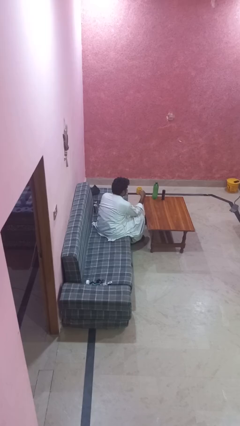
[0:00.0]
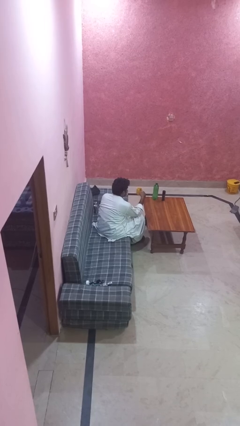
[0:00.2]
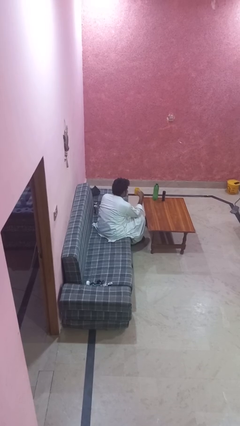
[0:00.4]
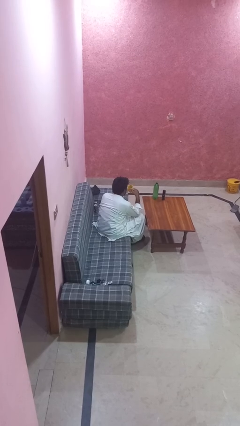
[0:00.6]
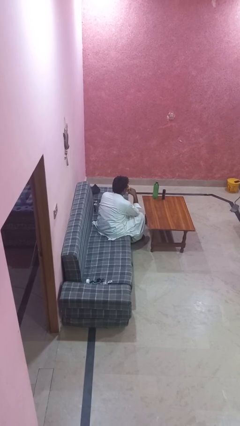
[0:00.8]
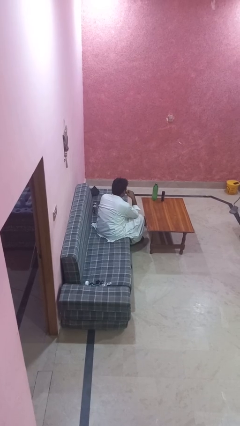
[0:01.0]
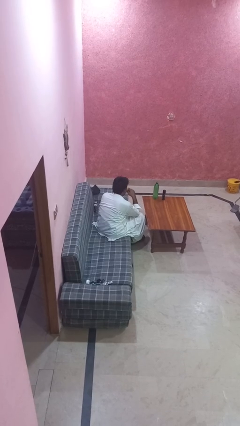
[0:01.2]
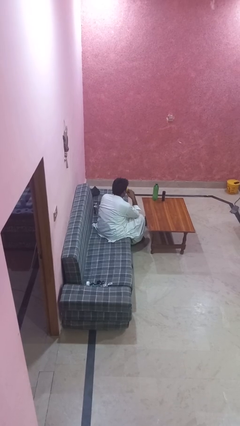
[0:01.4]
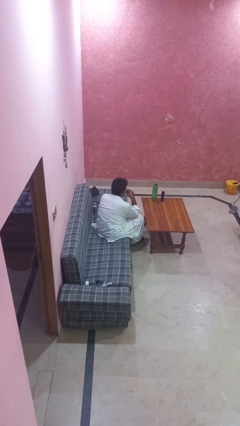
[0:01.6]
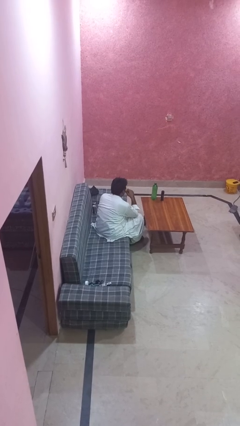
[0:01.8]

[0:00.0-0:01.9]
person drinks from mug

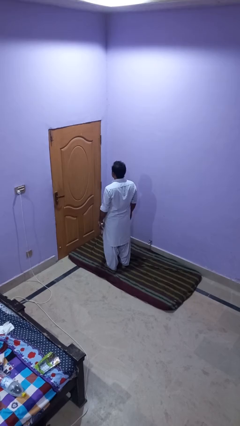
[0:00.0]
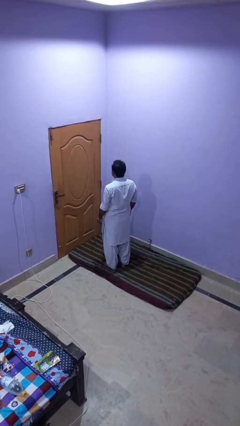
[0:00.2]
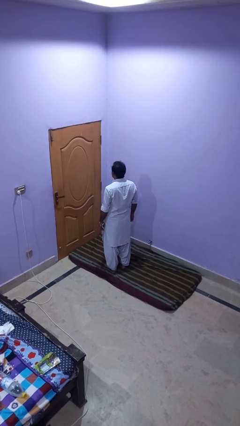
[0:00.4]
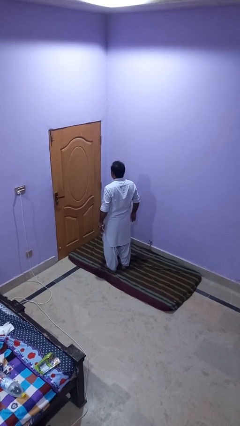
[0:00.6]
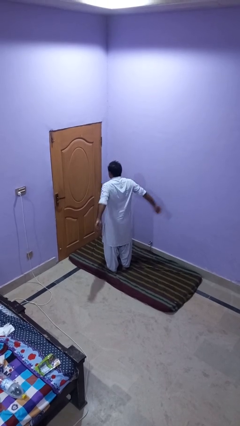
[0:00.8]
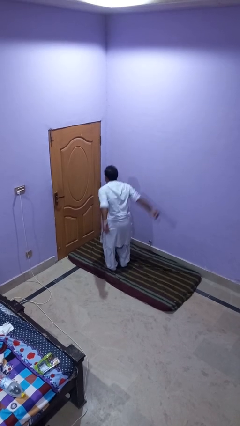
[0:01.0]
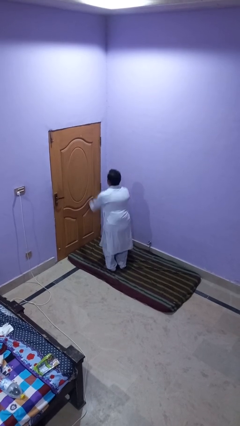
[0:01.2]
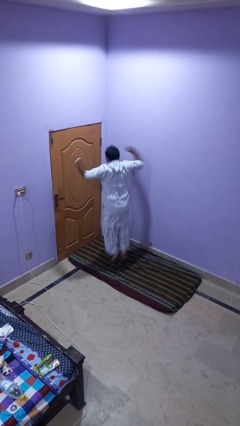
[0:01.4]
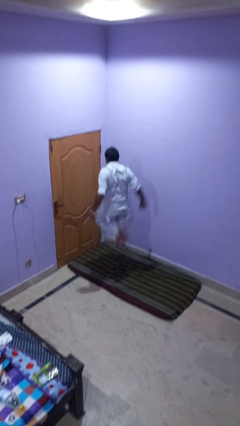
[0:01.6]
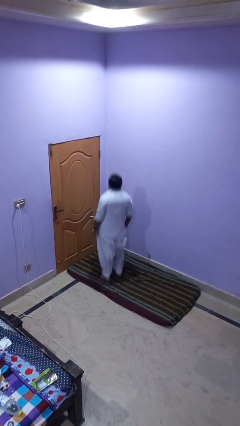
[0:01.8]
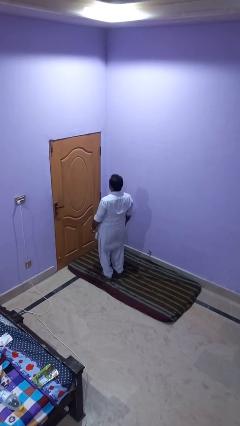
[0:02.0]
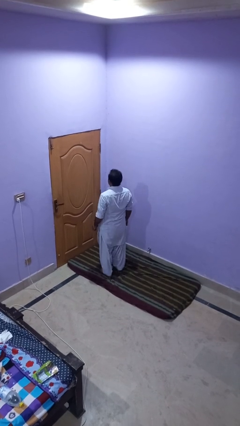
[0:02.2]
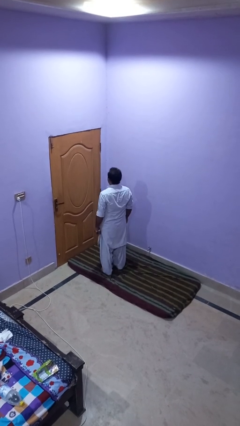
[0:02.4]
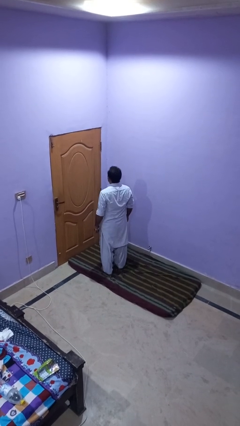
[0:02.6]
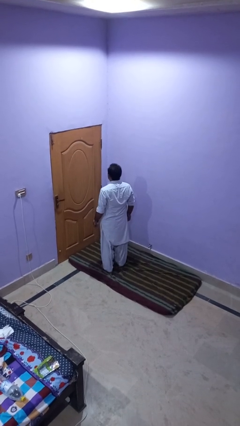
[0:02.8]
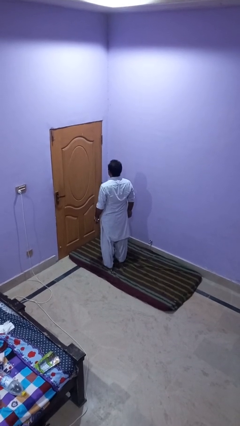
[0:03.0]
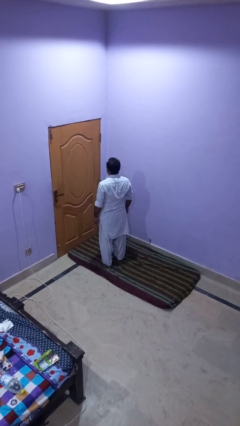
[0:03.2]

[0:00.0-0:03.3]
person jumps

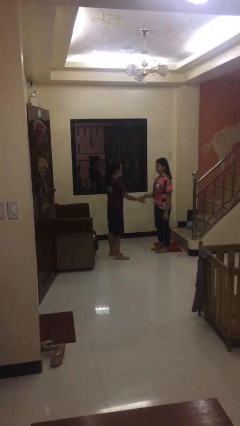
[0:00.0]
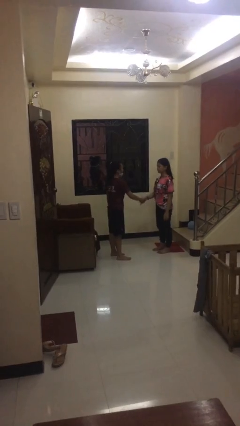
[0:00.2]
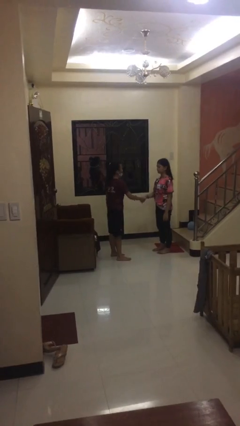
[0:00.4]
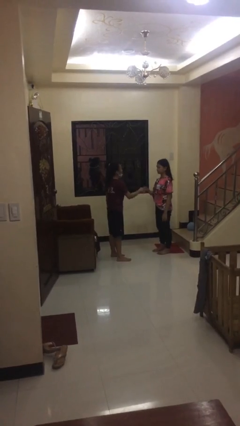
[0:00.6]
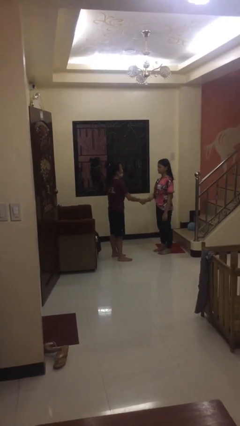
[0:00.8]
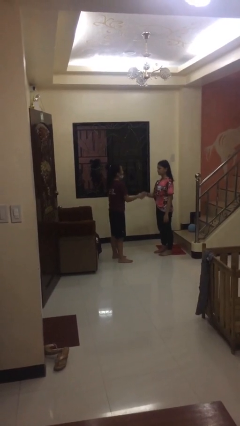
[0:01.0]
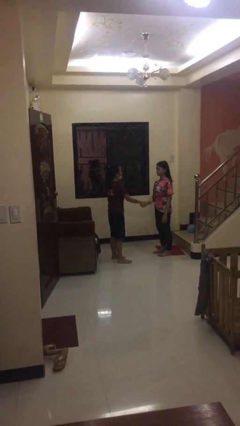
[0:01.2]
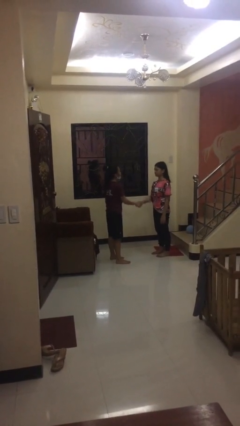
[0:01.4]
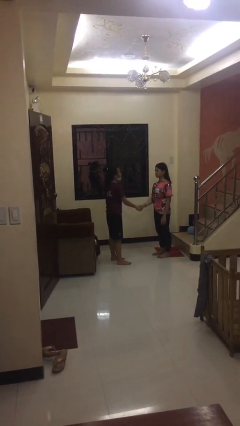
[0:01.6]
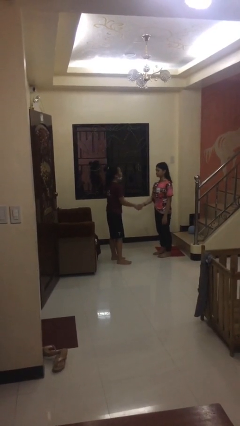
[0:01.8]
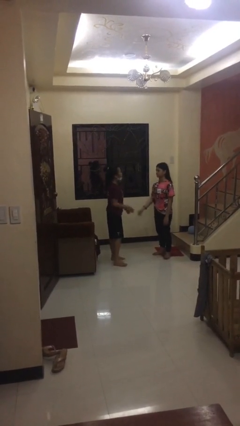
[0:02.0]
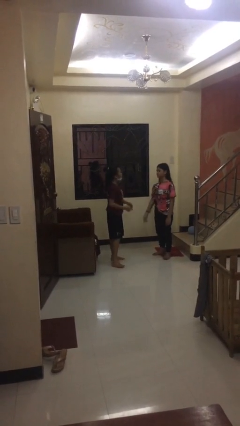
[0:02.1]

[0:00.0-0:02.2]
person shakes hand

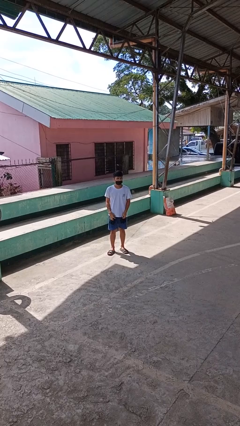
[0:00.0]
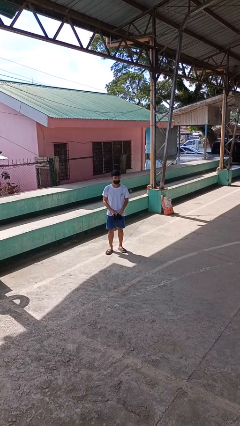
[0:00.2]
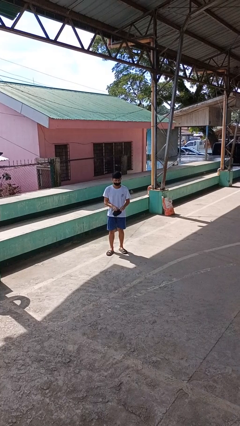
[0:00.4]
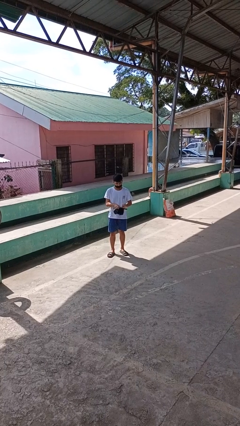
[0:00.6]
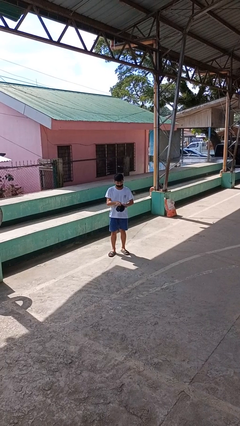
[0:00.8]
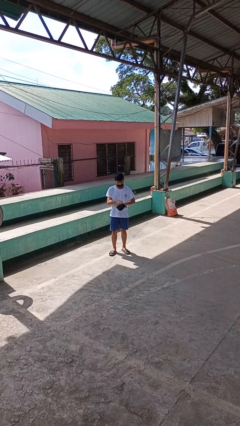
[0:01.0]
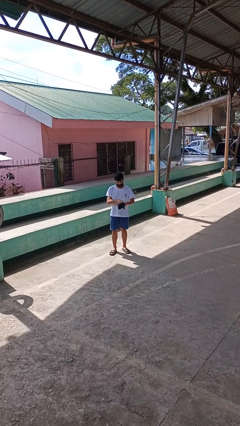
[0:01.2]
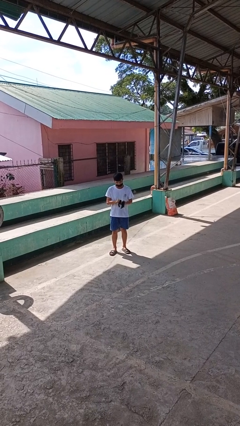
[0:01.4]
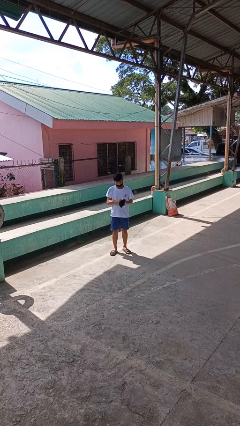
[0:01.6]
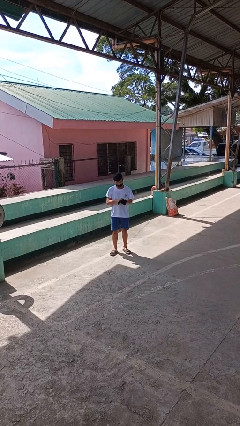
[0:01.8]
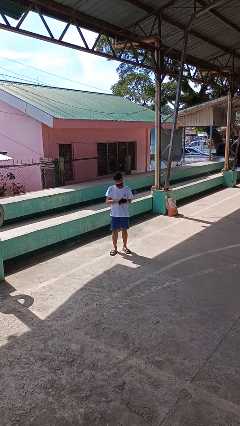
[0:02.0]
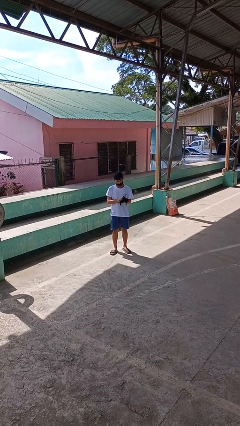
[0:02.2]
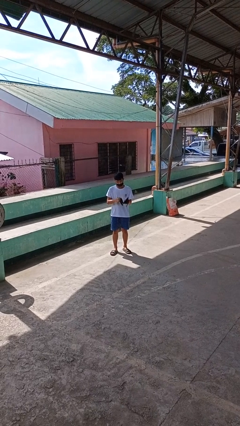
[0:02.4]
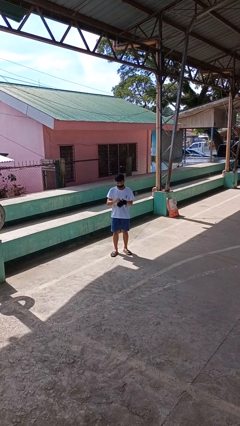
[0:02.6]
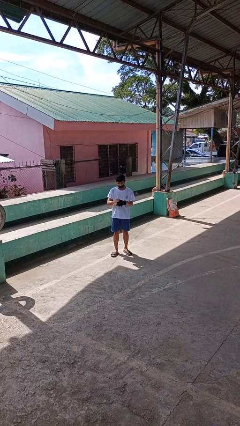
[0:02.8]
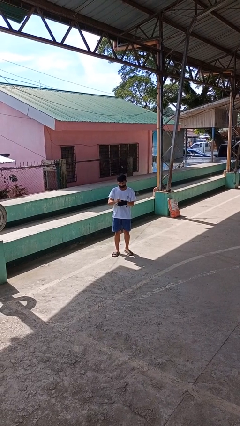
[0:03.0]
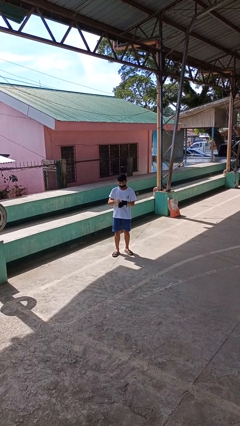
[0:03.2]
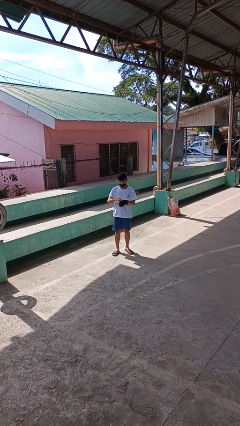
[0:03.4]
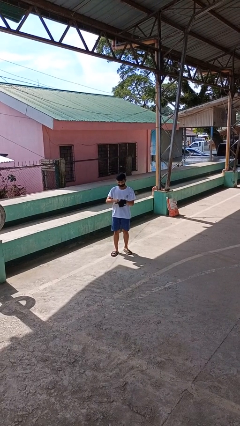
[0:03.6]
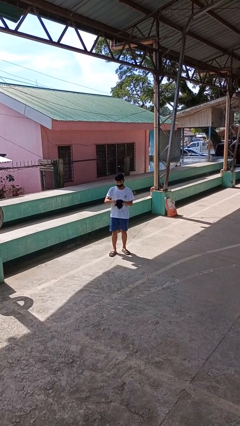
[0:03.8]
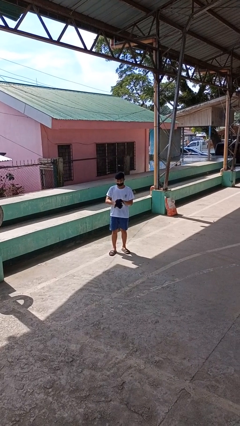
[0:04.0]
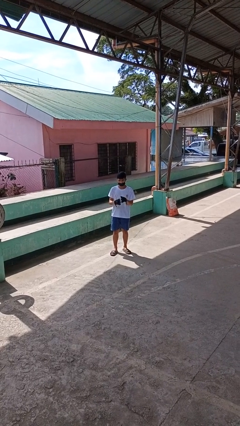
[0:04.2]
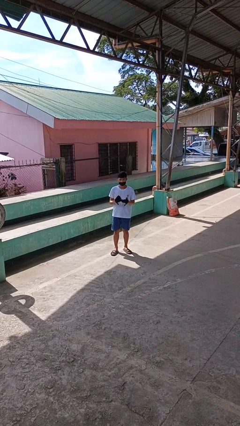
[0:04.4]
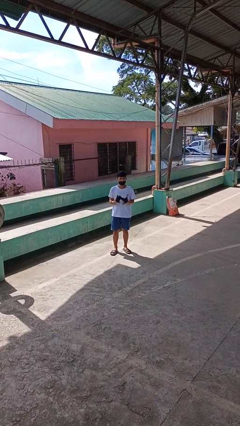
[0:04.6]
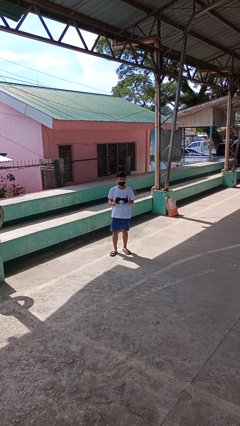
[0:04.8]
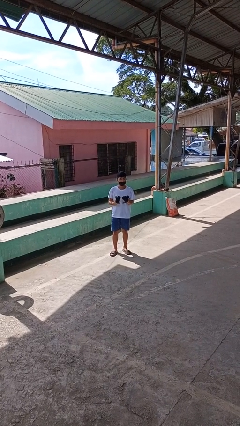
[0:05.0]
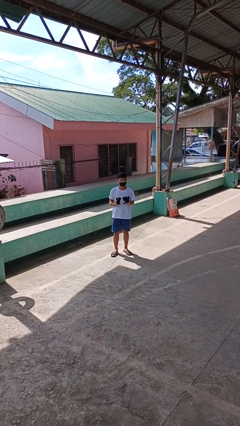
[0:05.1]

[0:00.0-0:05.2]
person puts on gloves

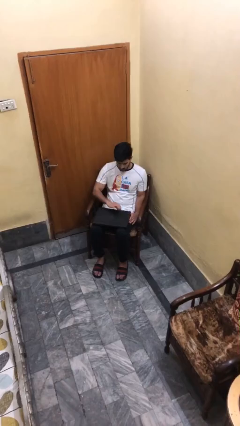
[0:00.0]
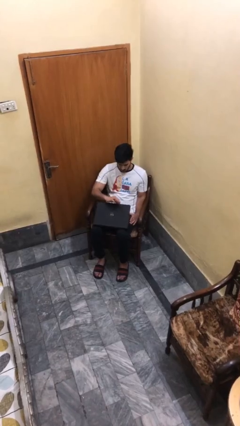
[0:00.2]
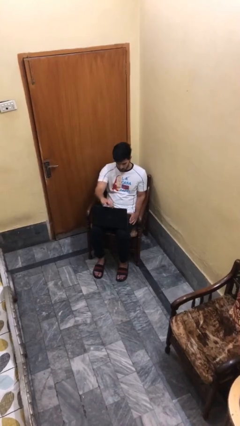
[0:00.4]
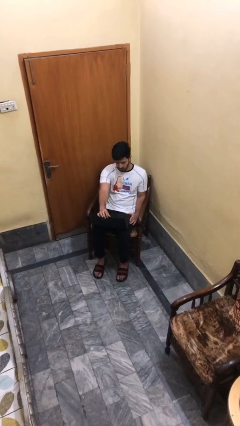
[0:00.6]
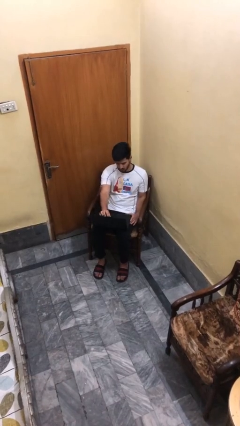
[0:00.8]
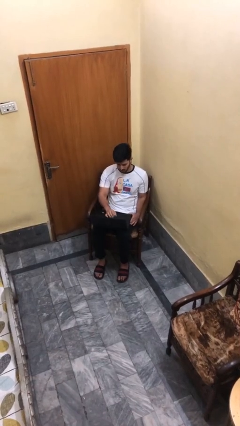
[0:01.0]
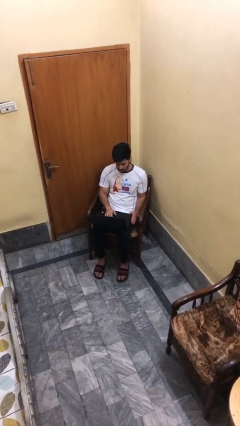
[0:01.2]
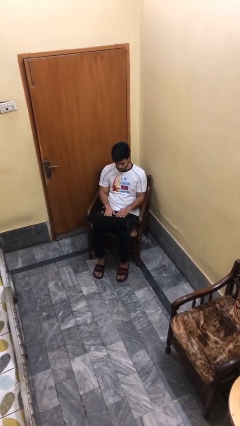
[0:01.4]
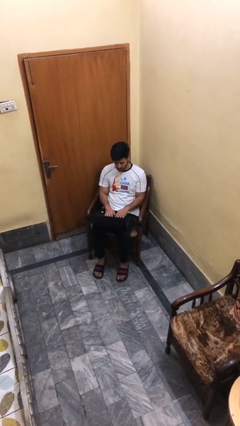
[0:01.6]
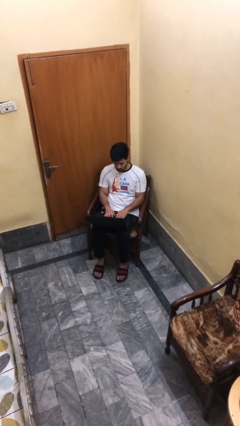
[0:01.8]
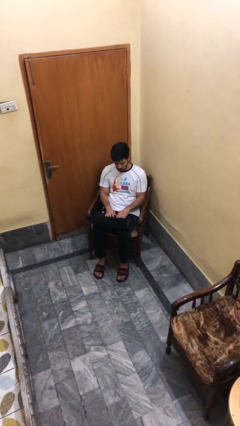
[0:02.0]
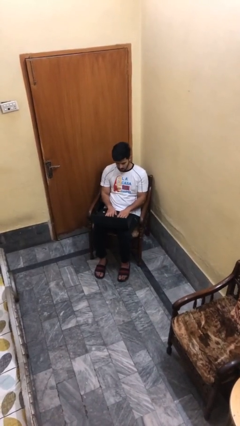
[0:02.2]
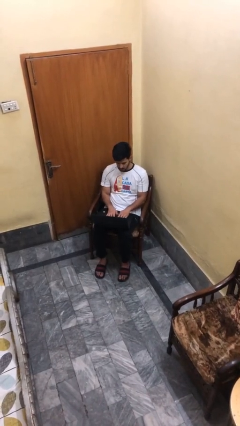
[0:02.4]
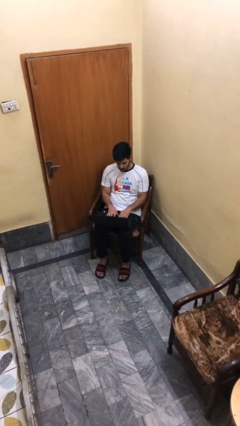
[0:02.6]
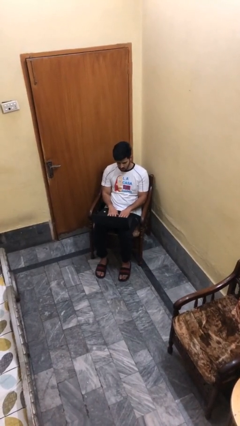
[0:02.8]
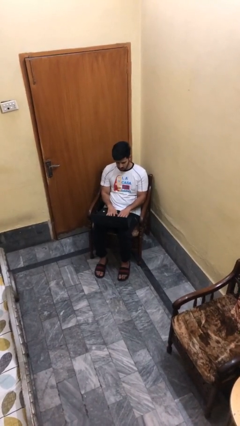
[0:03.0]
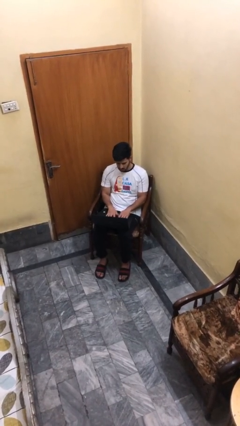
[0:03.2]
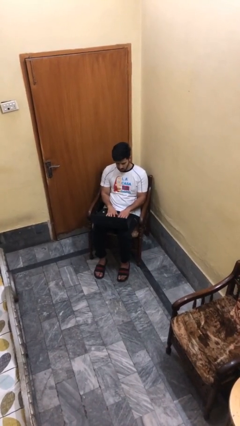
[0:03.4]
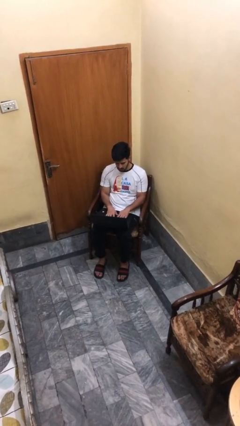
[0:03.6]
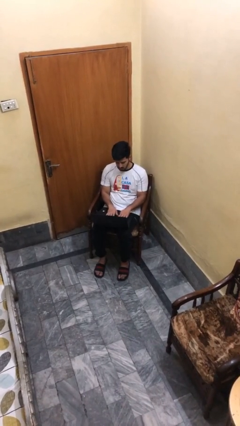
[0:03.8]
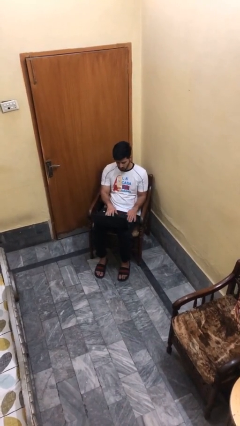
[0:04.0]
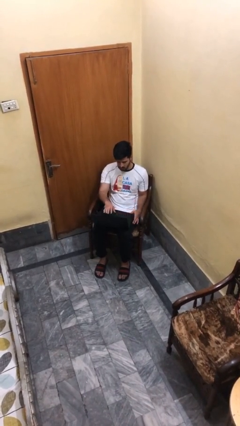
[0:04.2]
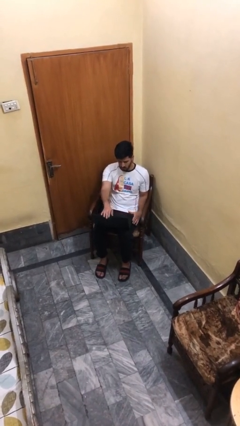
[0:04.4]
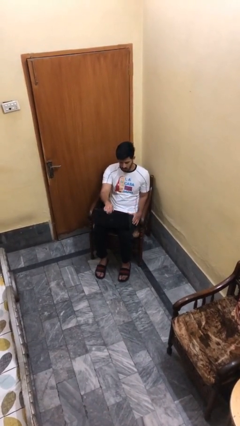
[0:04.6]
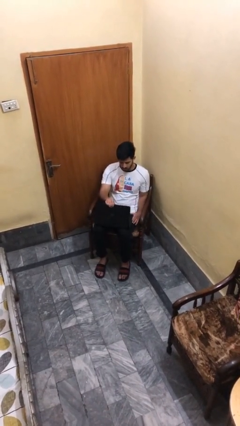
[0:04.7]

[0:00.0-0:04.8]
person interacts with laptop

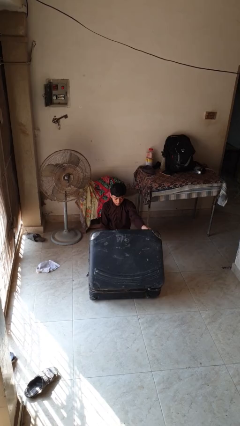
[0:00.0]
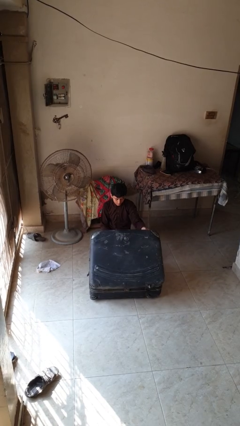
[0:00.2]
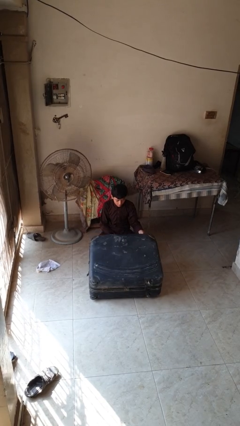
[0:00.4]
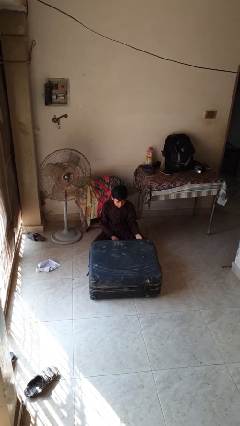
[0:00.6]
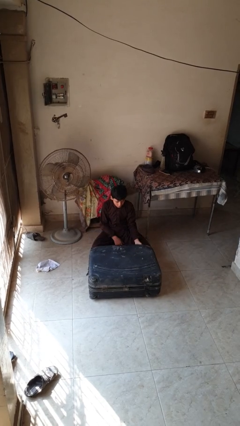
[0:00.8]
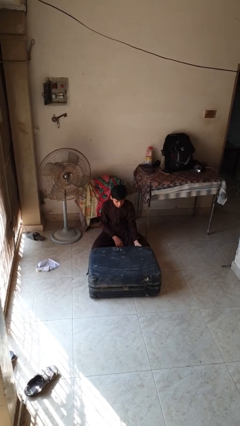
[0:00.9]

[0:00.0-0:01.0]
person closes suitcase
